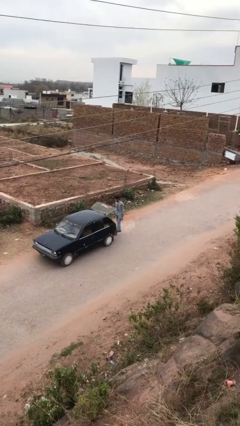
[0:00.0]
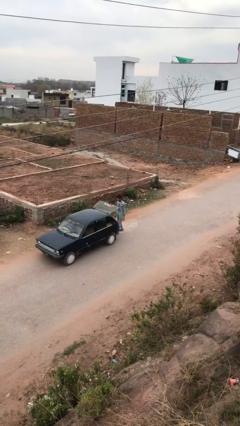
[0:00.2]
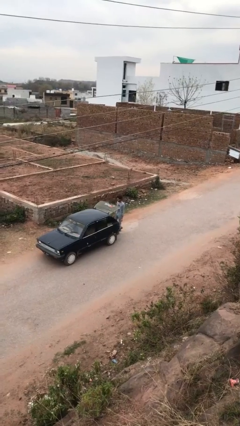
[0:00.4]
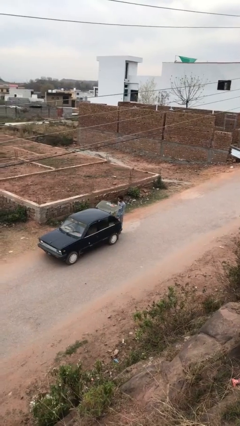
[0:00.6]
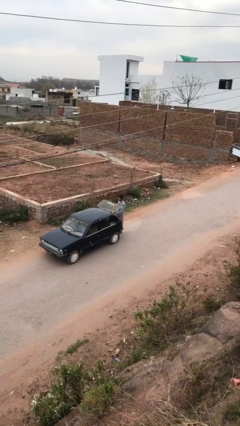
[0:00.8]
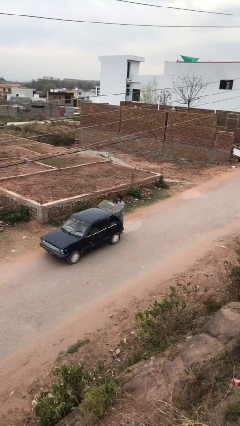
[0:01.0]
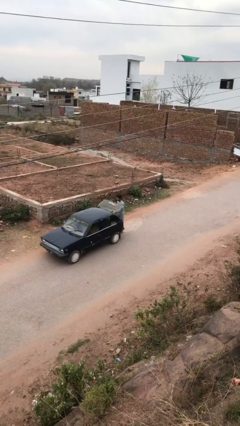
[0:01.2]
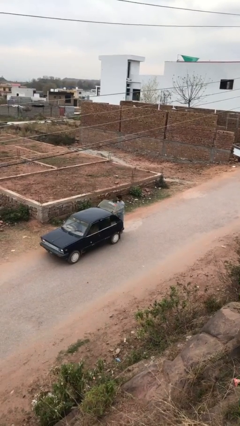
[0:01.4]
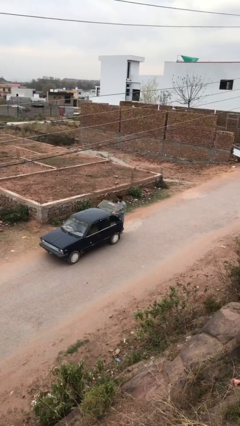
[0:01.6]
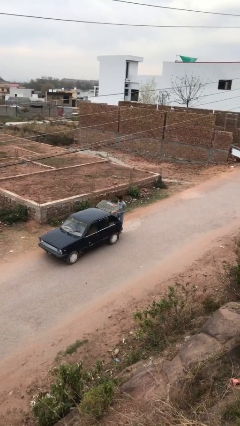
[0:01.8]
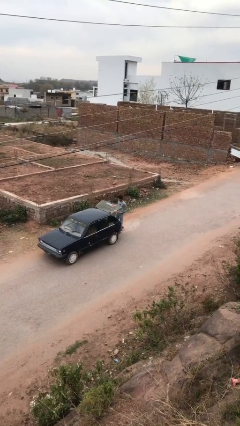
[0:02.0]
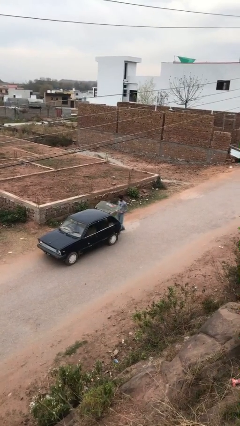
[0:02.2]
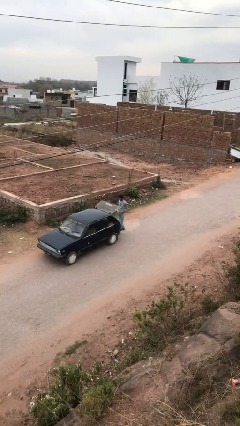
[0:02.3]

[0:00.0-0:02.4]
person unloads car

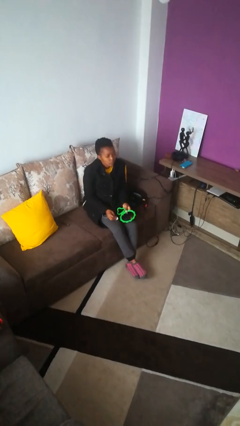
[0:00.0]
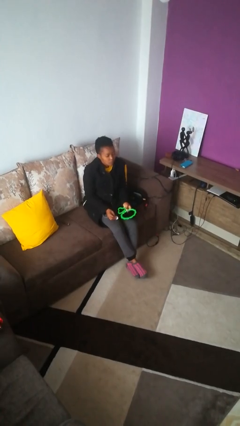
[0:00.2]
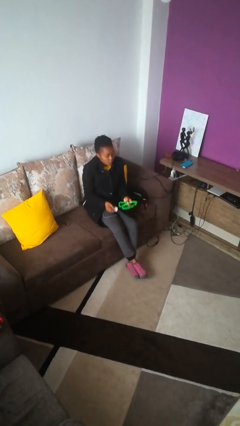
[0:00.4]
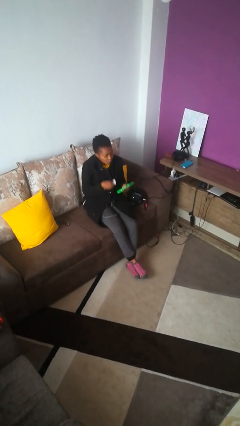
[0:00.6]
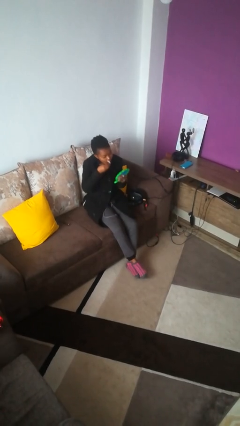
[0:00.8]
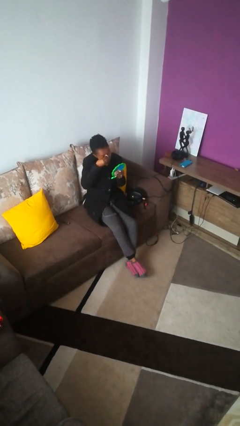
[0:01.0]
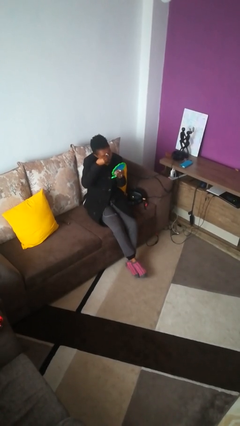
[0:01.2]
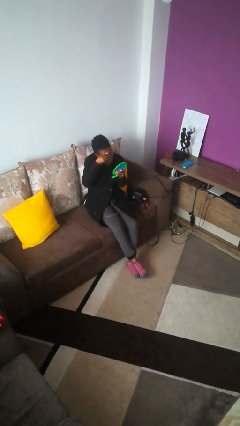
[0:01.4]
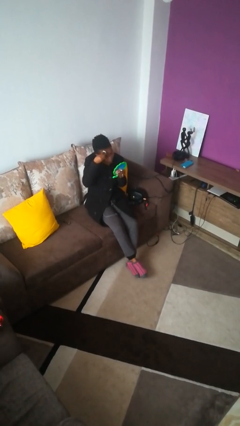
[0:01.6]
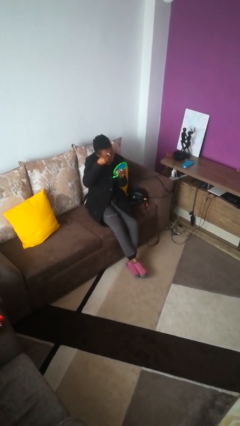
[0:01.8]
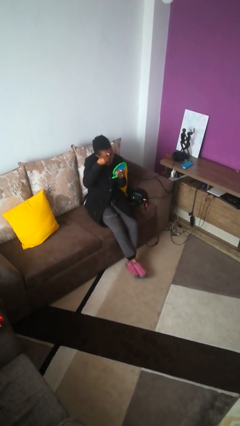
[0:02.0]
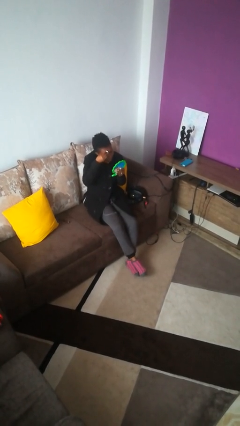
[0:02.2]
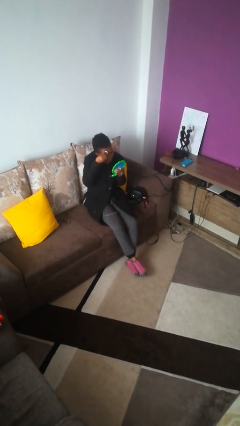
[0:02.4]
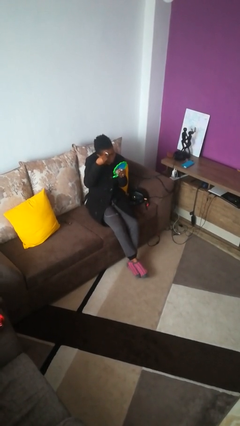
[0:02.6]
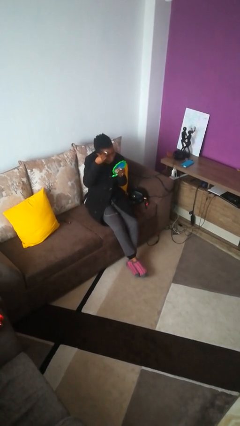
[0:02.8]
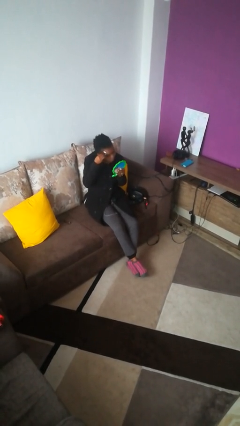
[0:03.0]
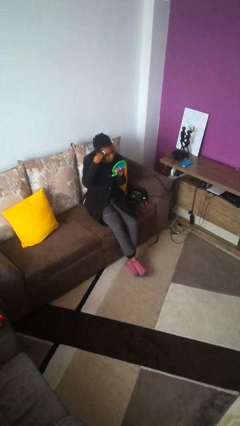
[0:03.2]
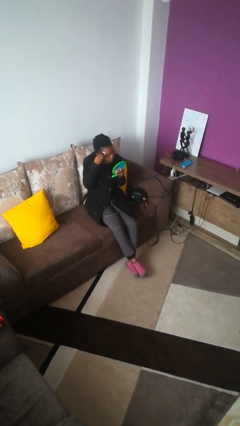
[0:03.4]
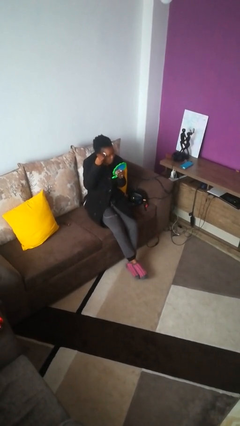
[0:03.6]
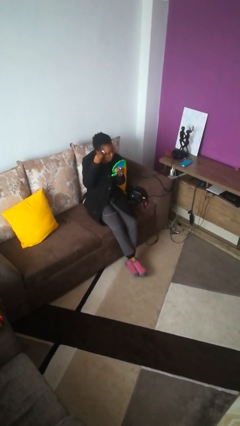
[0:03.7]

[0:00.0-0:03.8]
person applies foundation makeup

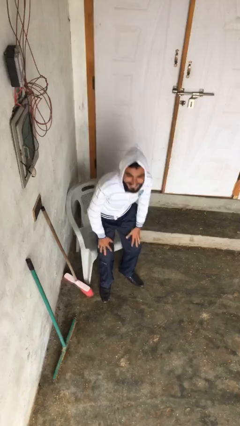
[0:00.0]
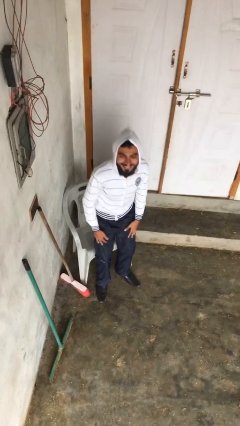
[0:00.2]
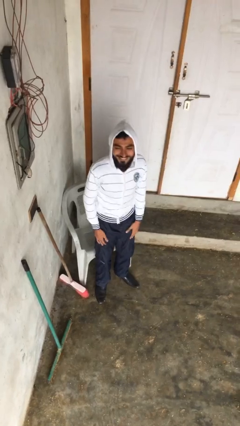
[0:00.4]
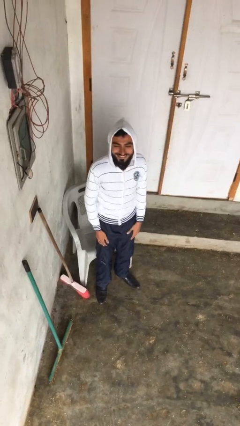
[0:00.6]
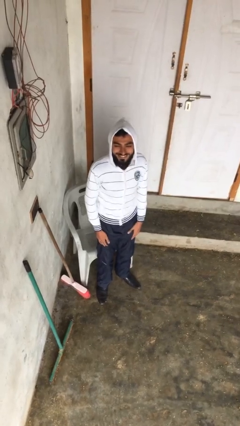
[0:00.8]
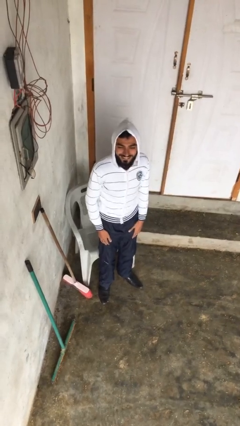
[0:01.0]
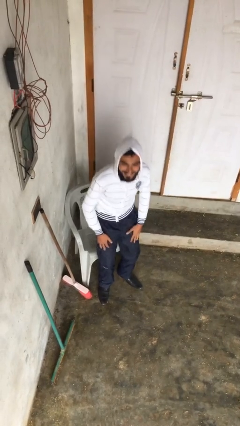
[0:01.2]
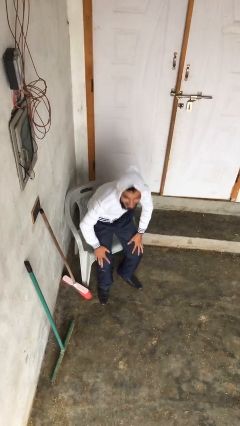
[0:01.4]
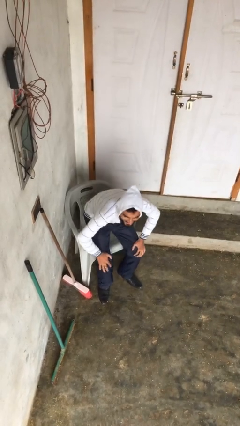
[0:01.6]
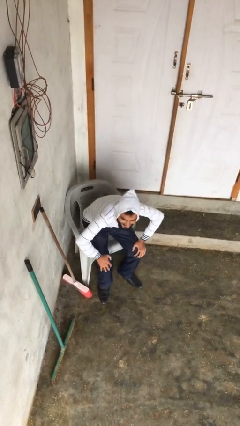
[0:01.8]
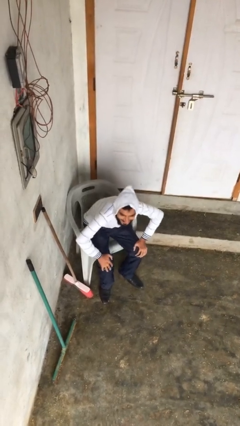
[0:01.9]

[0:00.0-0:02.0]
person sits down

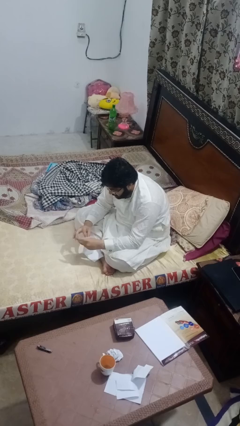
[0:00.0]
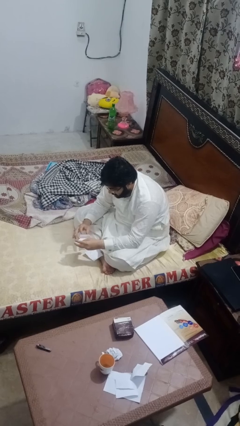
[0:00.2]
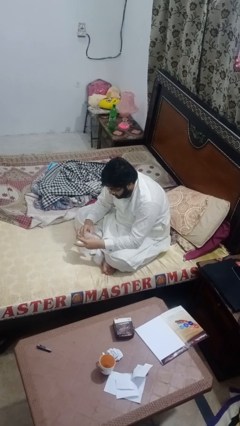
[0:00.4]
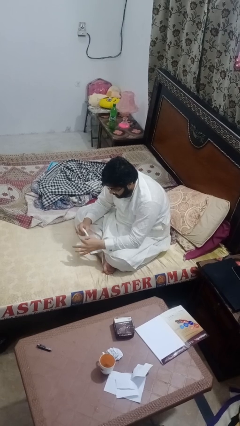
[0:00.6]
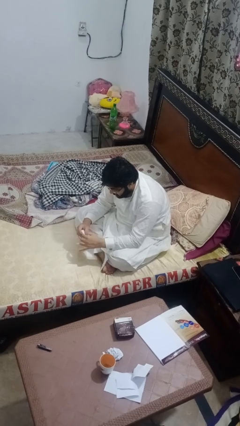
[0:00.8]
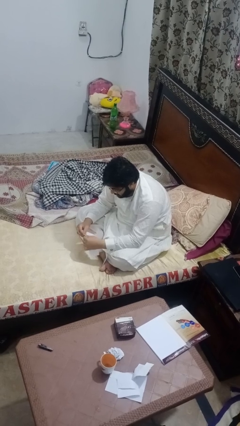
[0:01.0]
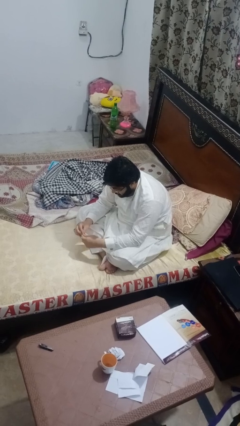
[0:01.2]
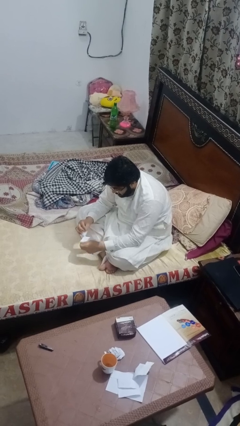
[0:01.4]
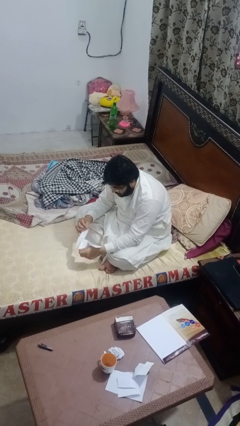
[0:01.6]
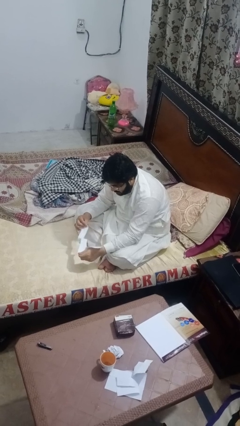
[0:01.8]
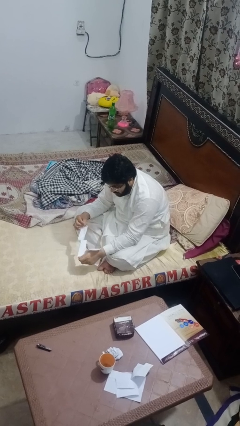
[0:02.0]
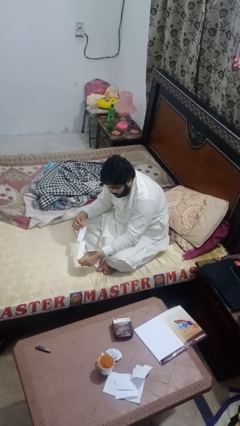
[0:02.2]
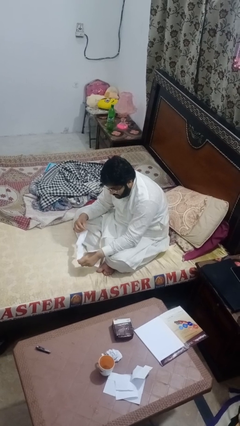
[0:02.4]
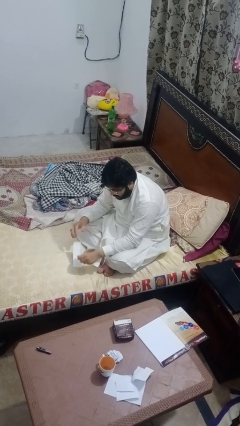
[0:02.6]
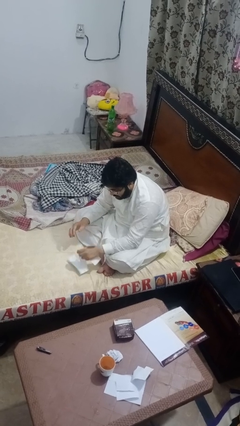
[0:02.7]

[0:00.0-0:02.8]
person tears paper

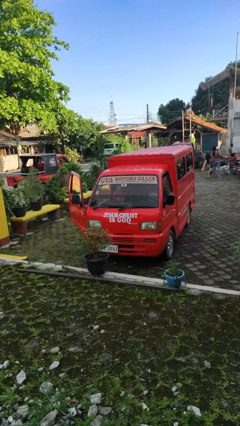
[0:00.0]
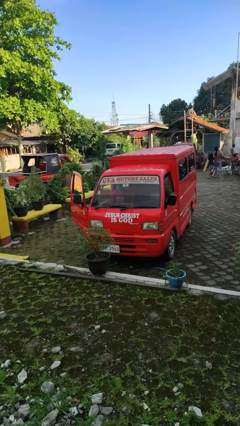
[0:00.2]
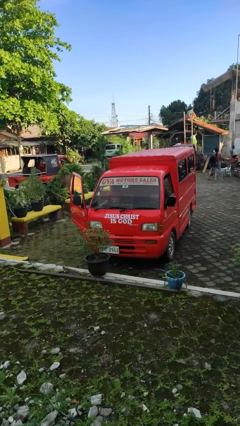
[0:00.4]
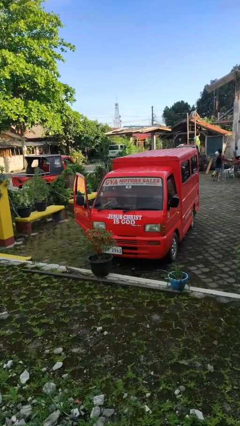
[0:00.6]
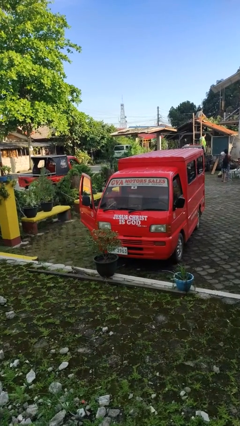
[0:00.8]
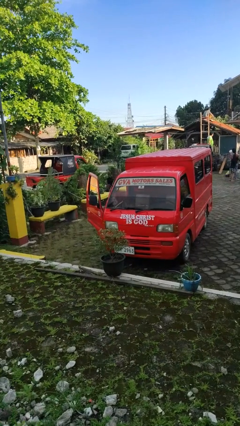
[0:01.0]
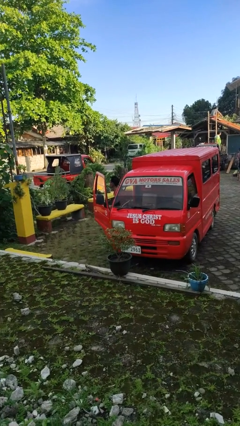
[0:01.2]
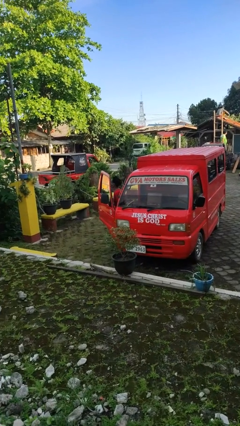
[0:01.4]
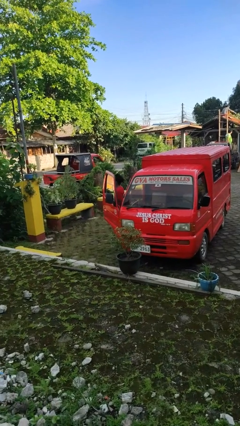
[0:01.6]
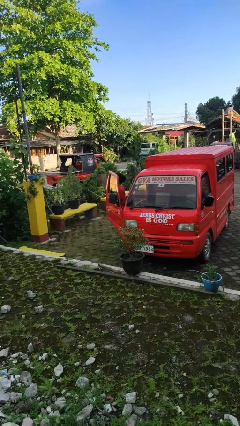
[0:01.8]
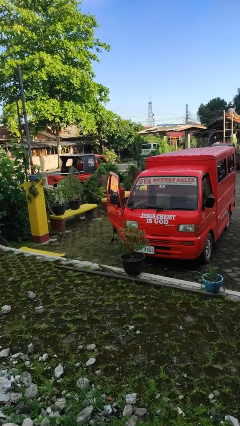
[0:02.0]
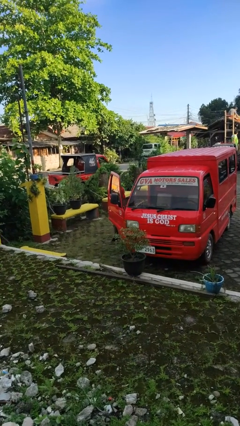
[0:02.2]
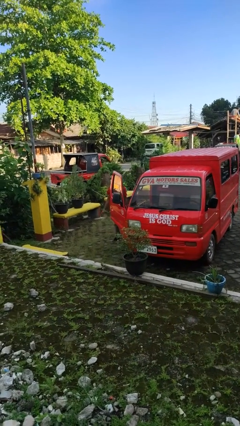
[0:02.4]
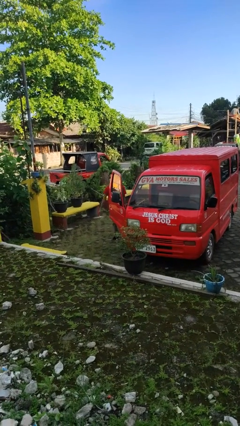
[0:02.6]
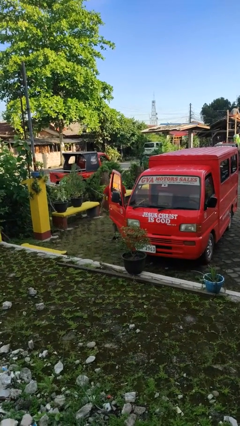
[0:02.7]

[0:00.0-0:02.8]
person exits car

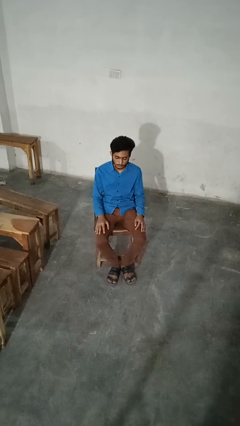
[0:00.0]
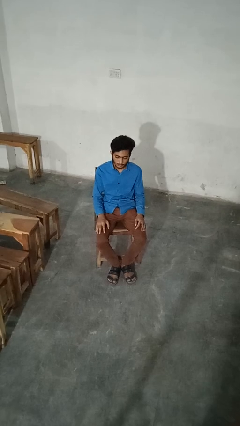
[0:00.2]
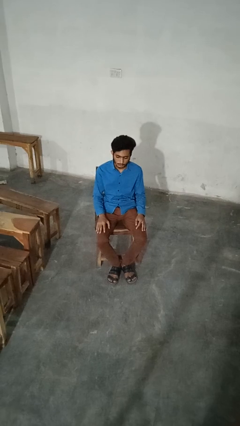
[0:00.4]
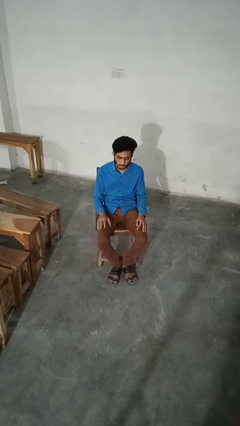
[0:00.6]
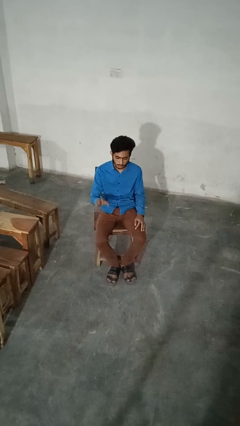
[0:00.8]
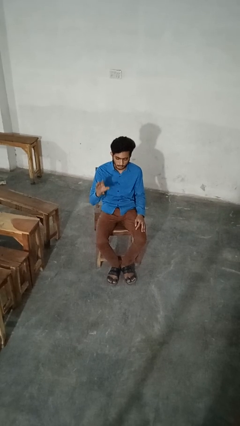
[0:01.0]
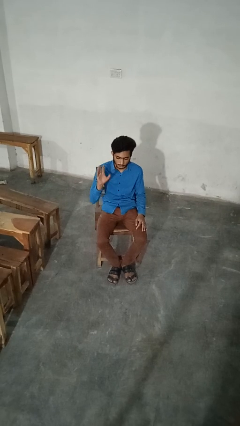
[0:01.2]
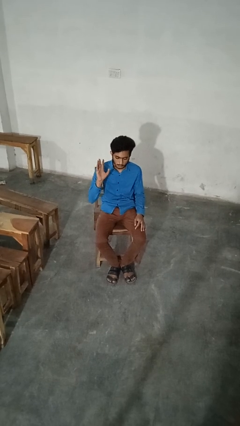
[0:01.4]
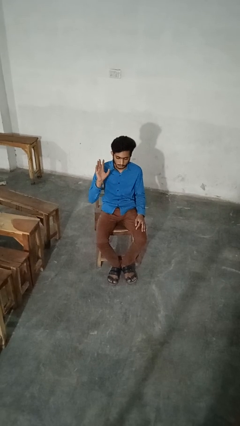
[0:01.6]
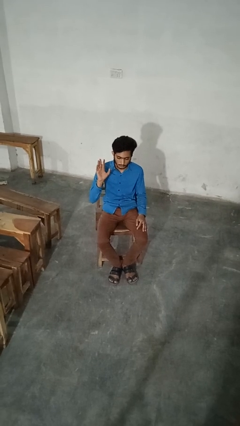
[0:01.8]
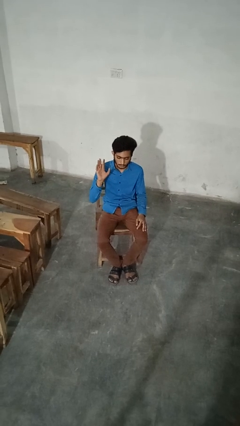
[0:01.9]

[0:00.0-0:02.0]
person gestures raise hand

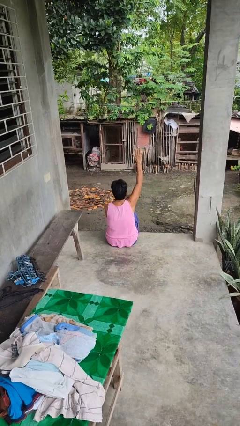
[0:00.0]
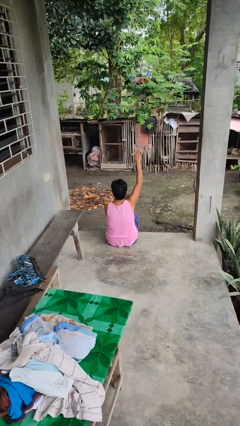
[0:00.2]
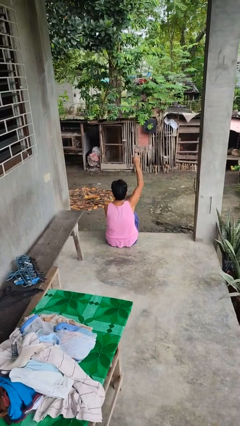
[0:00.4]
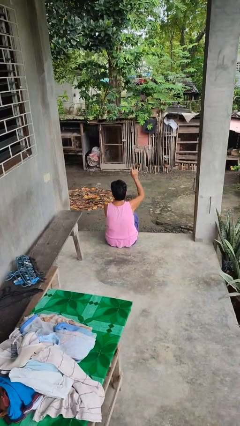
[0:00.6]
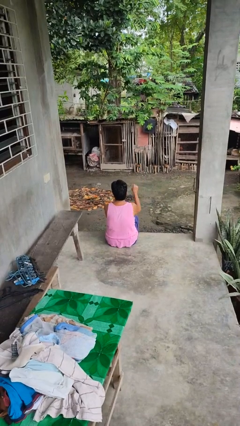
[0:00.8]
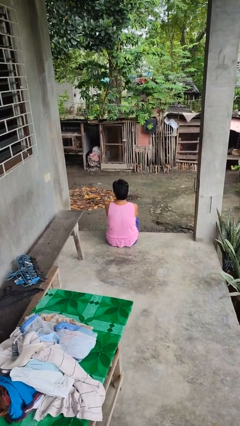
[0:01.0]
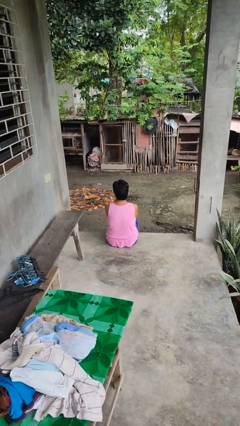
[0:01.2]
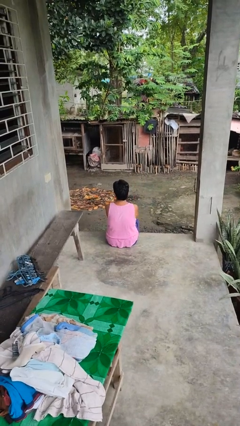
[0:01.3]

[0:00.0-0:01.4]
person gestures lower hand
